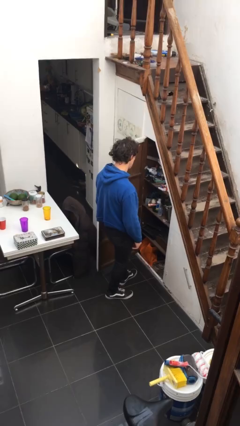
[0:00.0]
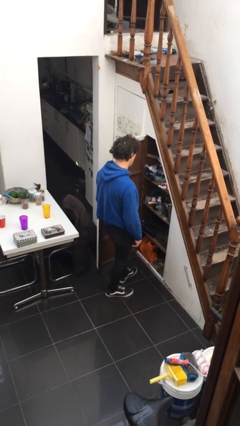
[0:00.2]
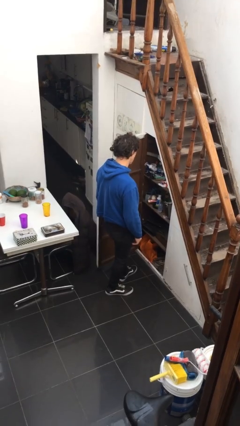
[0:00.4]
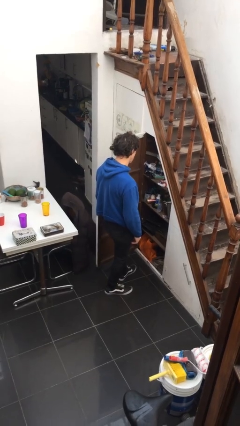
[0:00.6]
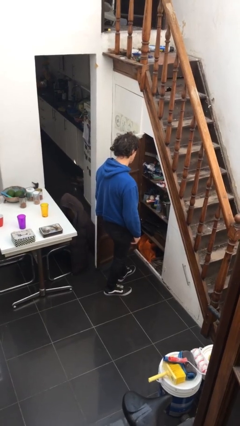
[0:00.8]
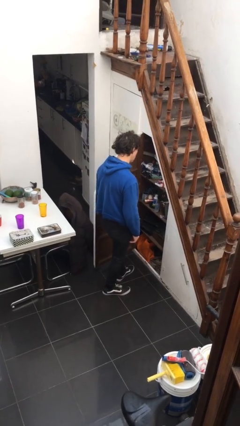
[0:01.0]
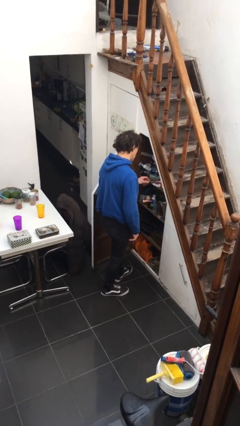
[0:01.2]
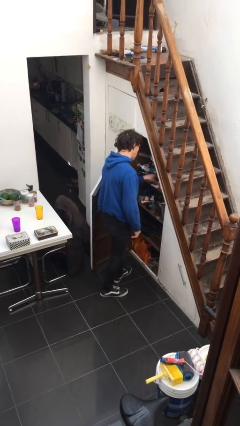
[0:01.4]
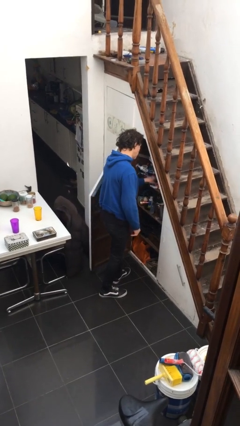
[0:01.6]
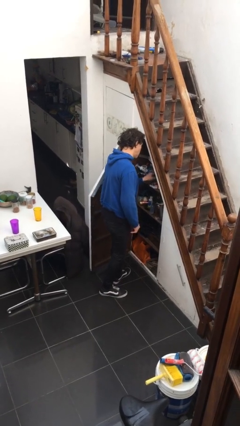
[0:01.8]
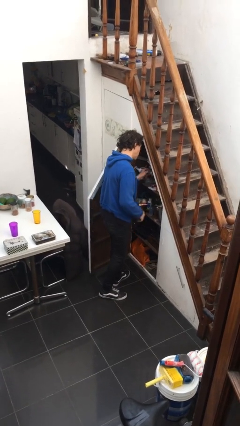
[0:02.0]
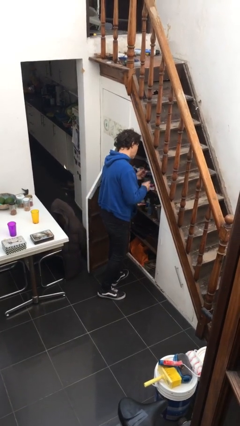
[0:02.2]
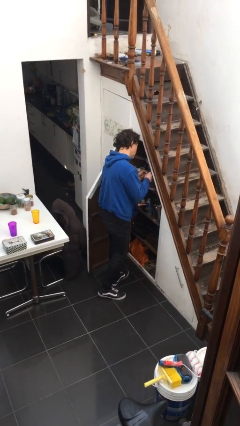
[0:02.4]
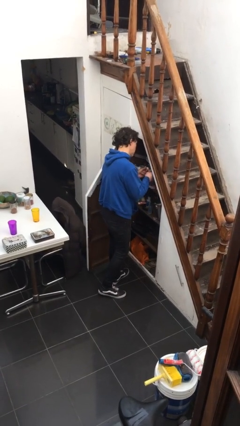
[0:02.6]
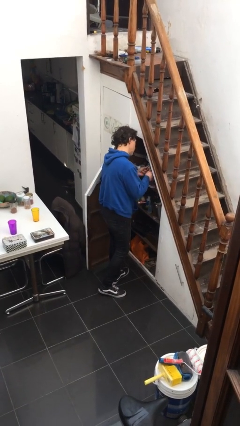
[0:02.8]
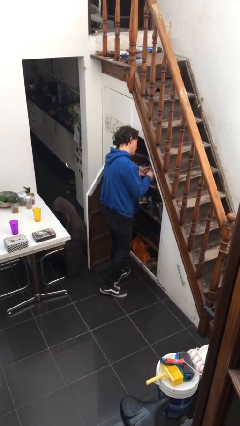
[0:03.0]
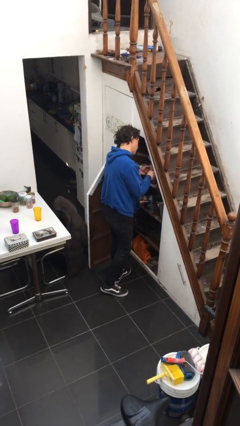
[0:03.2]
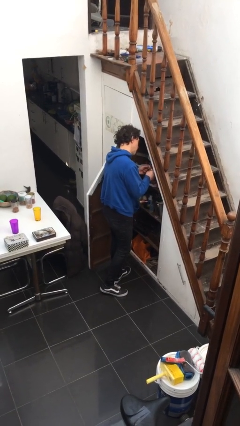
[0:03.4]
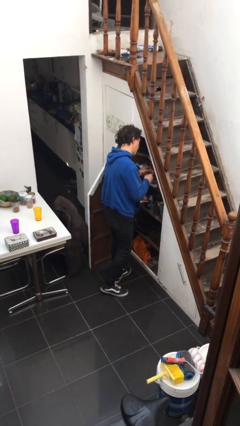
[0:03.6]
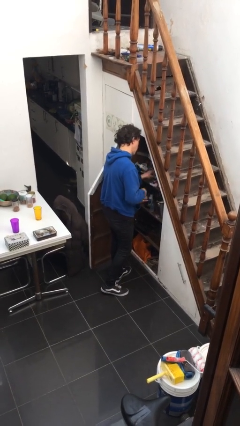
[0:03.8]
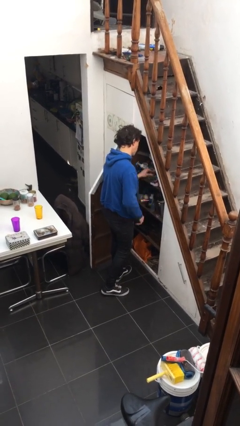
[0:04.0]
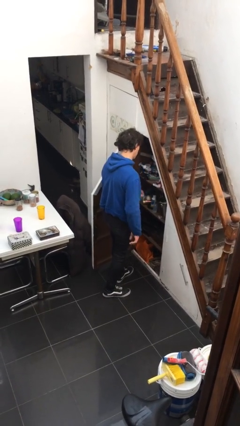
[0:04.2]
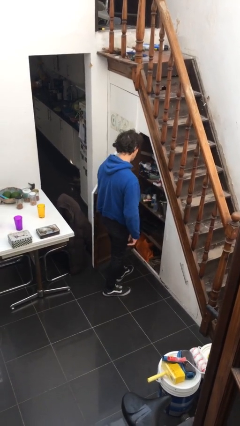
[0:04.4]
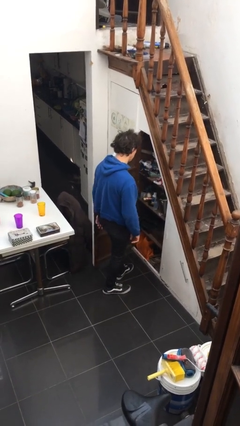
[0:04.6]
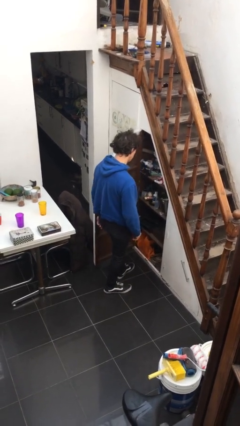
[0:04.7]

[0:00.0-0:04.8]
person searches in cabinet

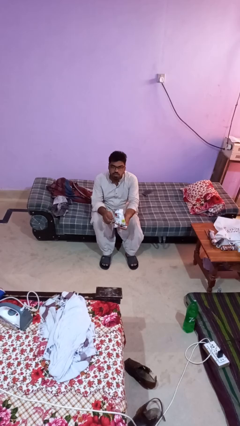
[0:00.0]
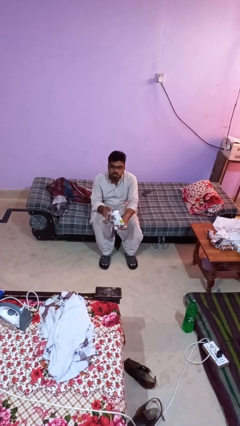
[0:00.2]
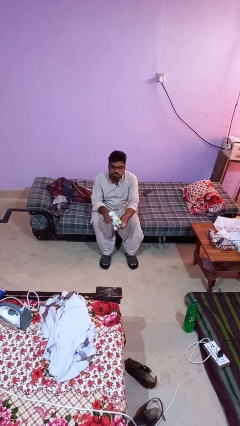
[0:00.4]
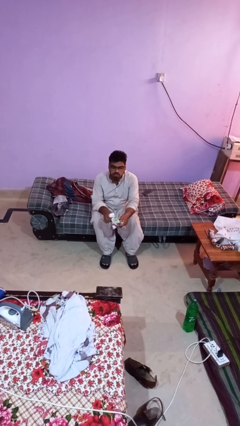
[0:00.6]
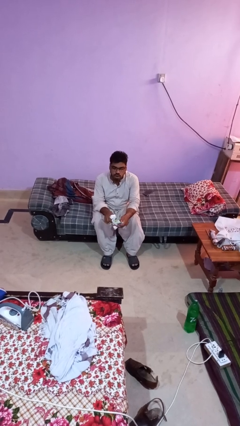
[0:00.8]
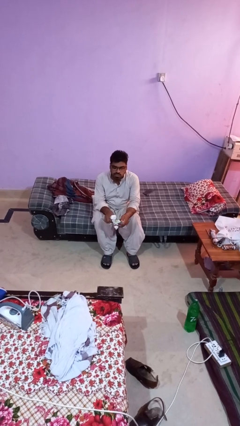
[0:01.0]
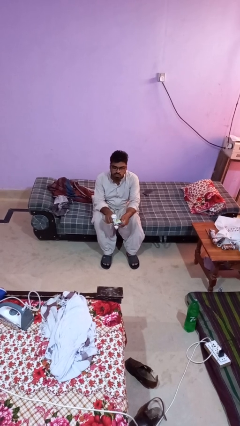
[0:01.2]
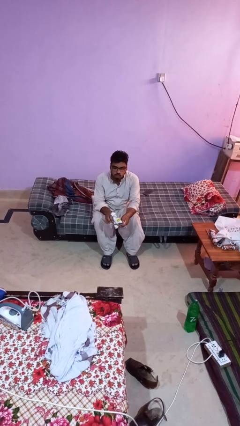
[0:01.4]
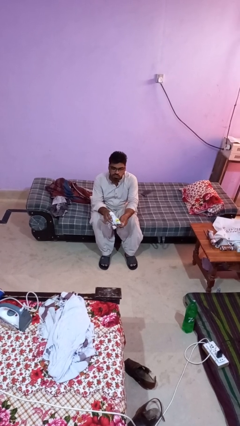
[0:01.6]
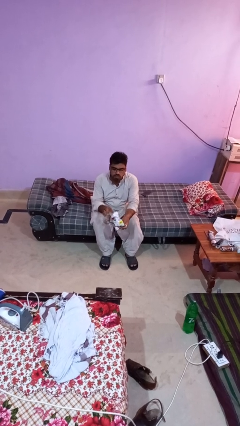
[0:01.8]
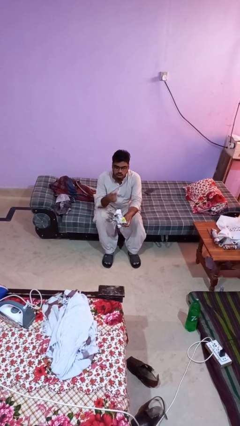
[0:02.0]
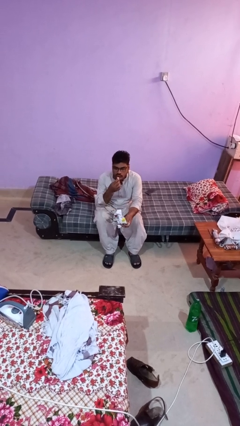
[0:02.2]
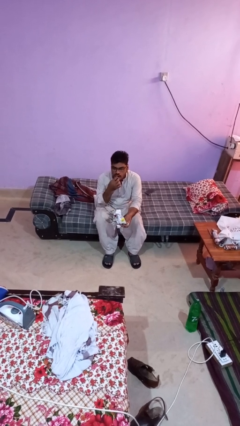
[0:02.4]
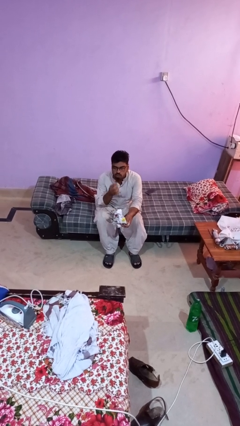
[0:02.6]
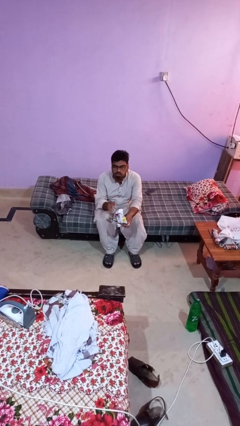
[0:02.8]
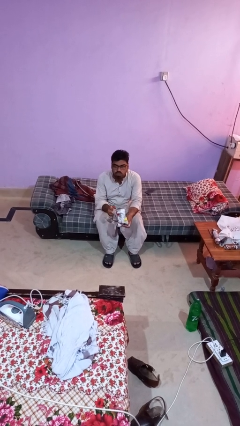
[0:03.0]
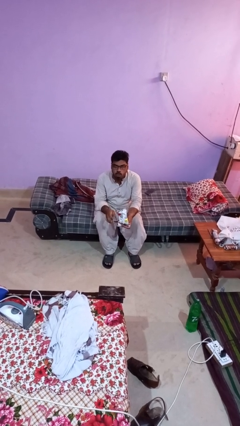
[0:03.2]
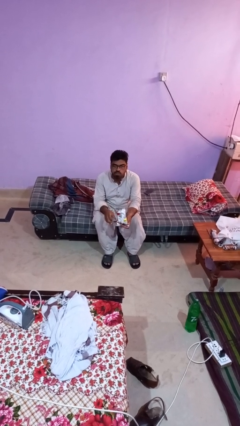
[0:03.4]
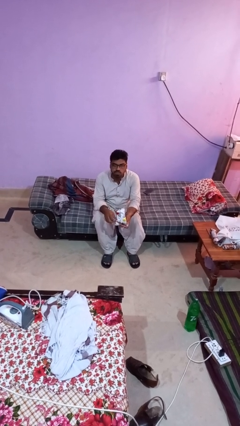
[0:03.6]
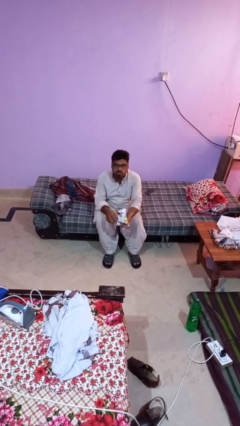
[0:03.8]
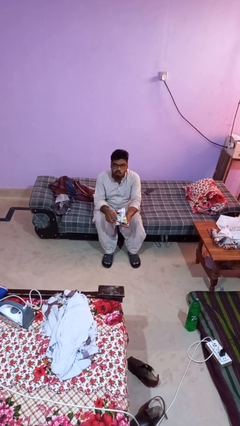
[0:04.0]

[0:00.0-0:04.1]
person eats snack from bag

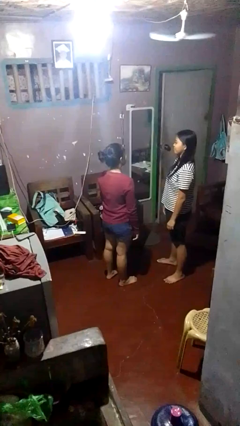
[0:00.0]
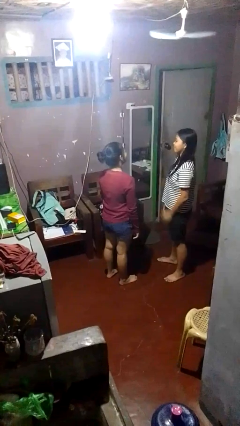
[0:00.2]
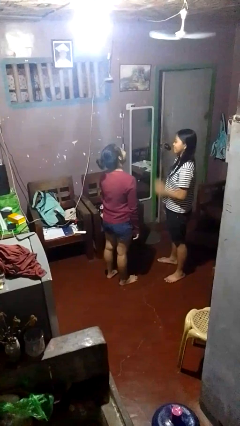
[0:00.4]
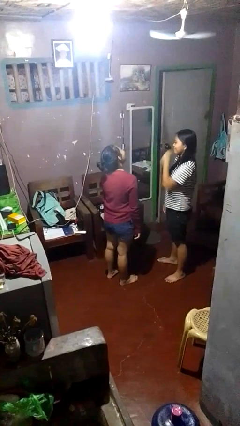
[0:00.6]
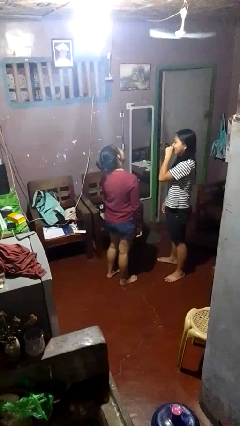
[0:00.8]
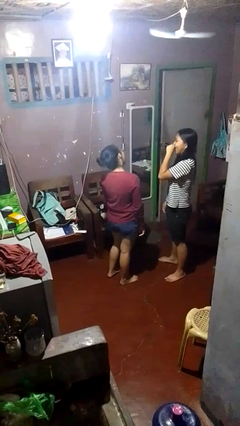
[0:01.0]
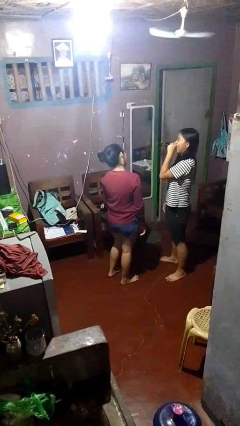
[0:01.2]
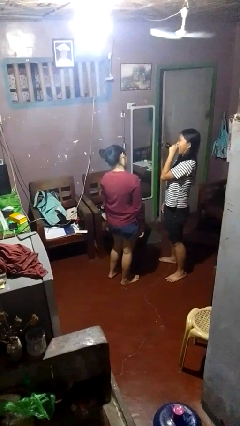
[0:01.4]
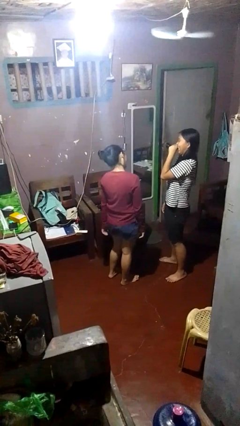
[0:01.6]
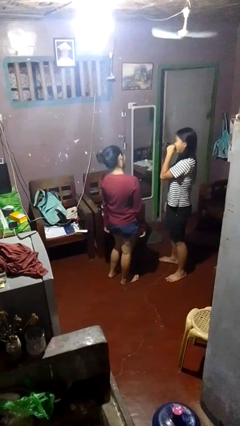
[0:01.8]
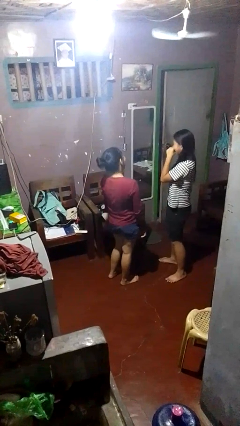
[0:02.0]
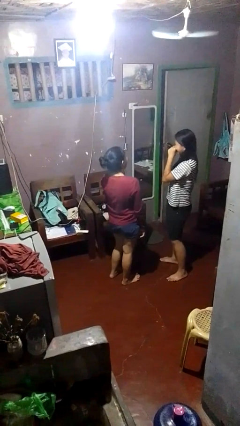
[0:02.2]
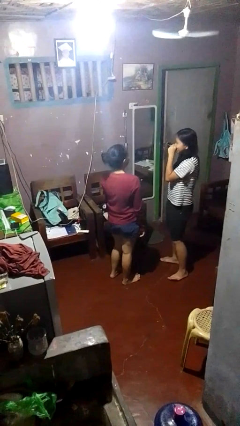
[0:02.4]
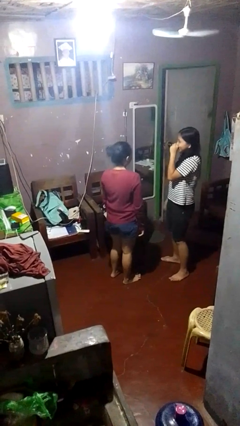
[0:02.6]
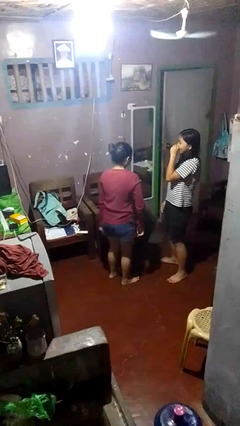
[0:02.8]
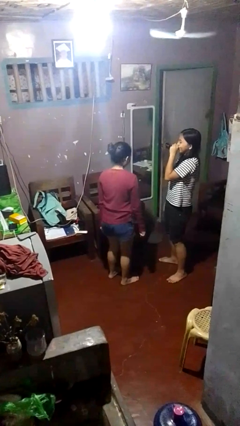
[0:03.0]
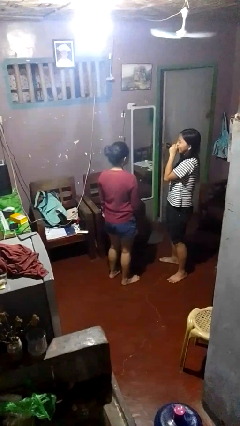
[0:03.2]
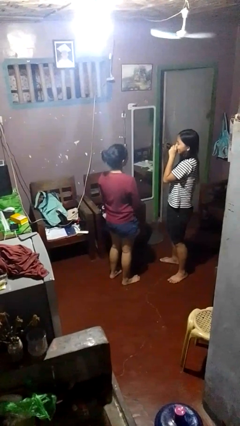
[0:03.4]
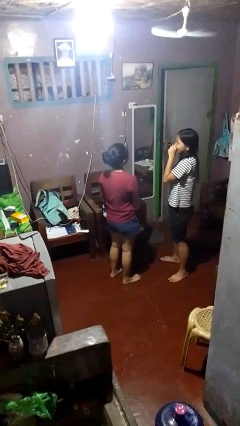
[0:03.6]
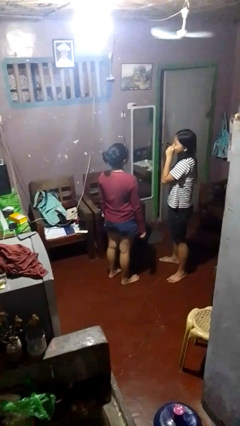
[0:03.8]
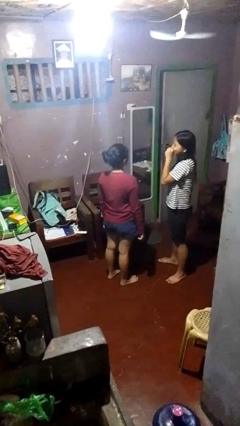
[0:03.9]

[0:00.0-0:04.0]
person laughs with person

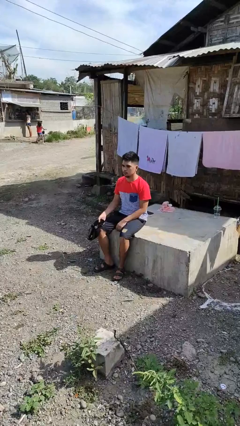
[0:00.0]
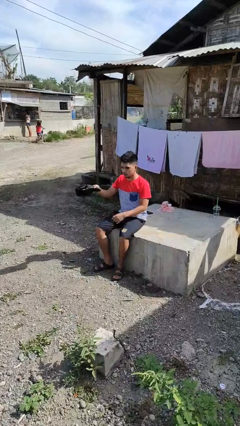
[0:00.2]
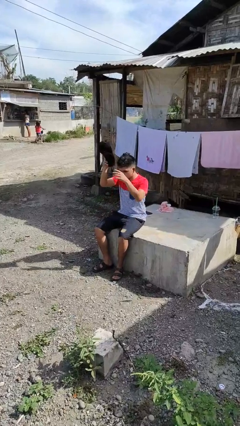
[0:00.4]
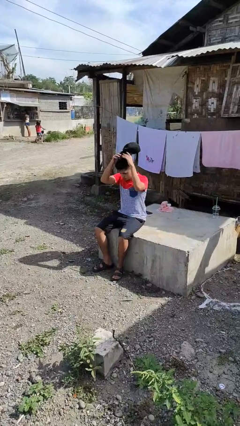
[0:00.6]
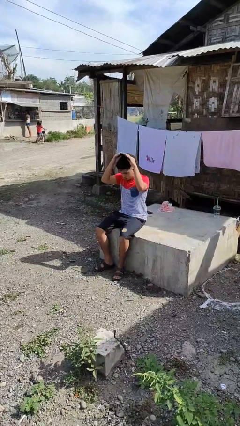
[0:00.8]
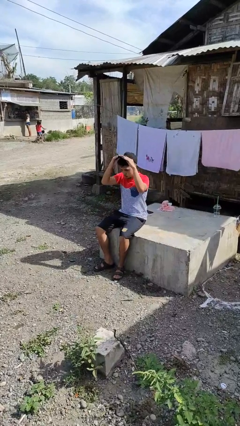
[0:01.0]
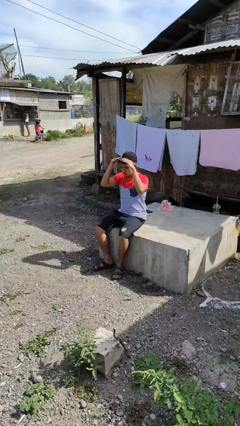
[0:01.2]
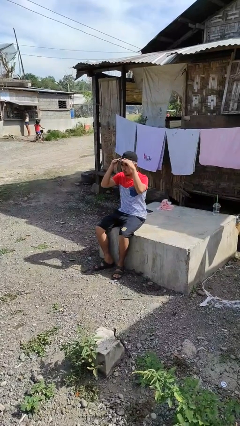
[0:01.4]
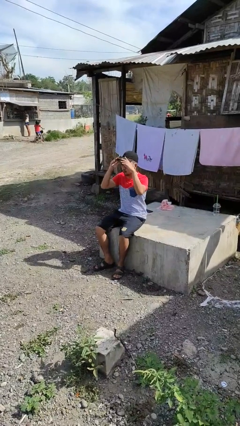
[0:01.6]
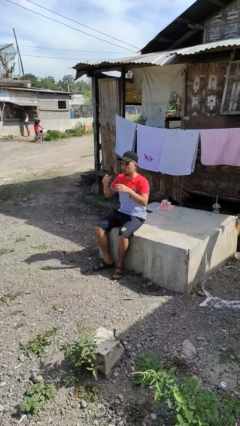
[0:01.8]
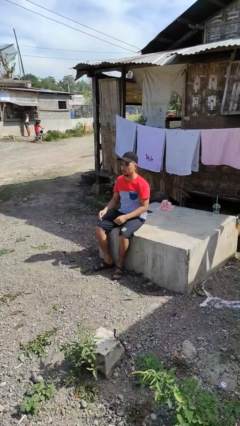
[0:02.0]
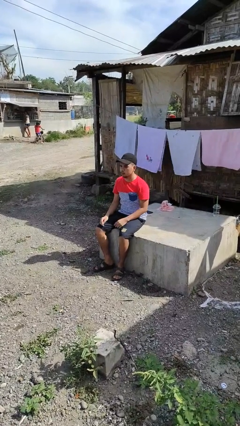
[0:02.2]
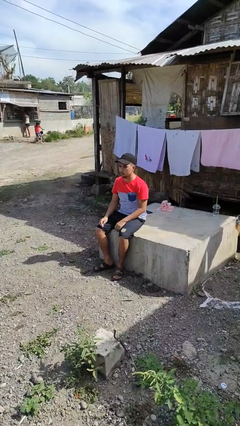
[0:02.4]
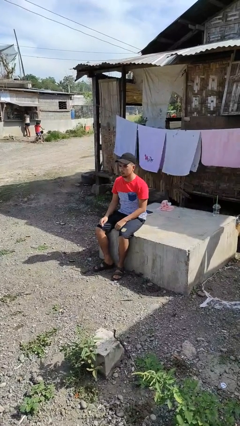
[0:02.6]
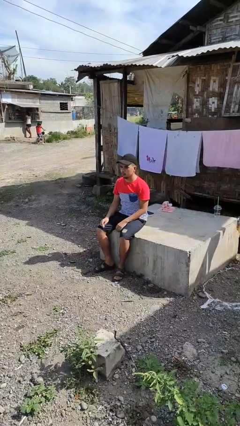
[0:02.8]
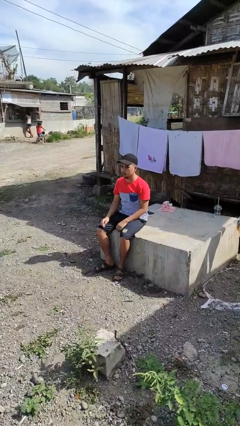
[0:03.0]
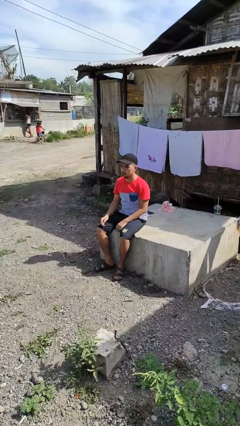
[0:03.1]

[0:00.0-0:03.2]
person puts on hat

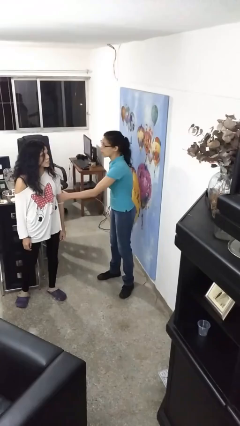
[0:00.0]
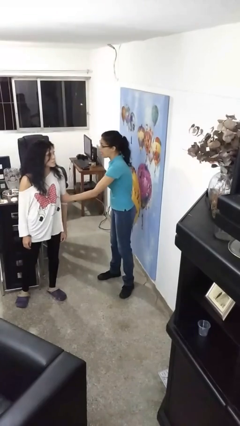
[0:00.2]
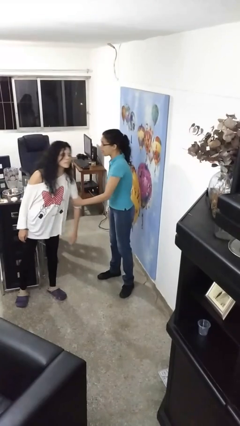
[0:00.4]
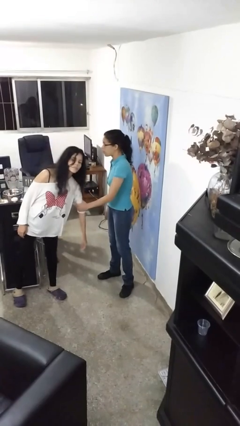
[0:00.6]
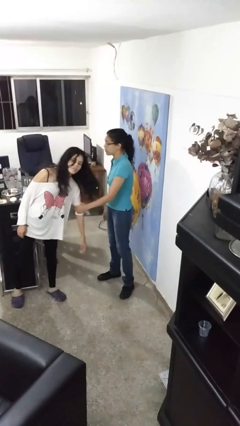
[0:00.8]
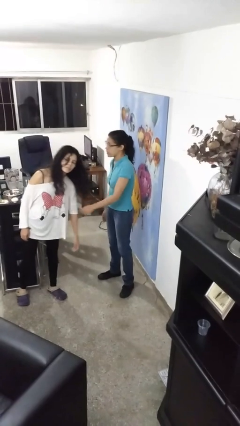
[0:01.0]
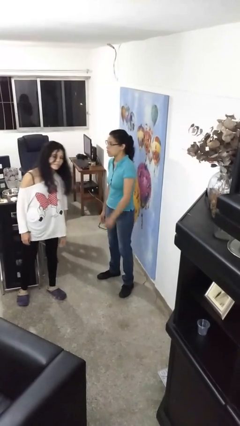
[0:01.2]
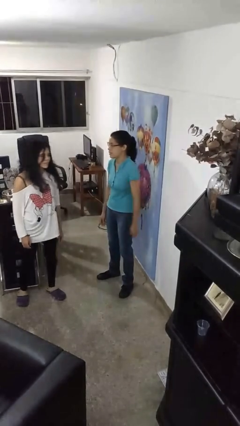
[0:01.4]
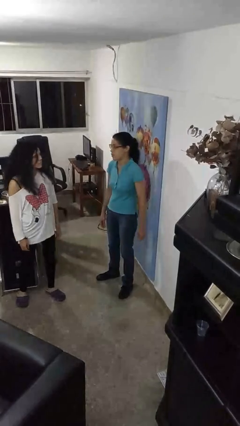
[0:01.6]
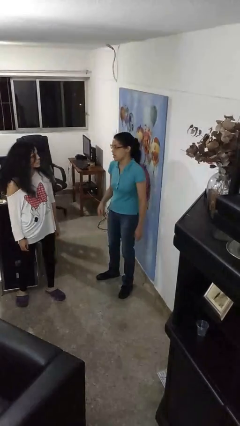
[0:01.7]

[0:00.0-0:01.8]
person grabs person by bicep
